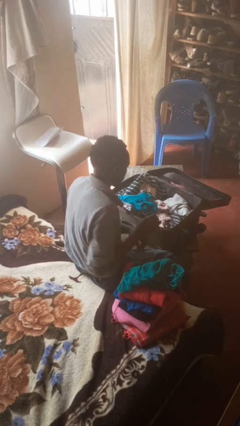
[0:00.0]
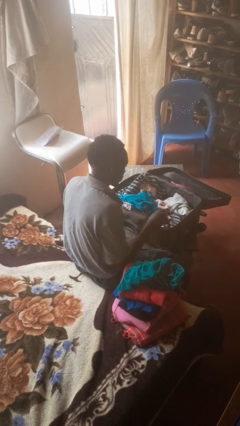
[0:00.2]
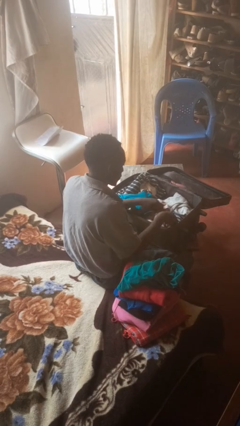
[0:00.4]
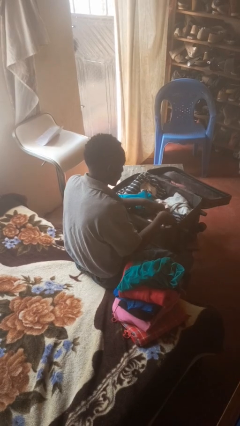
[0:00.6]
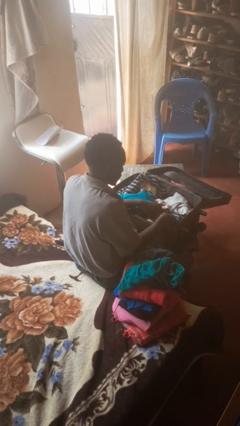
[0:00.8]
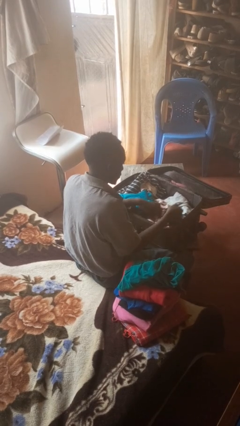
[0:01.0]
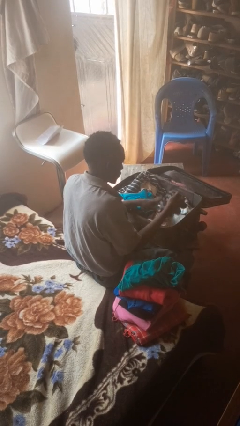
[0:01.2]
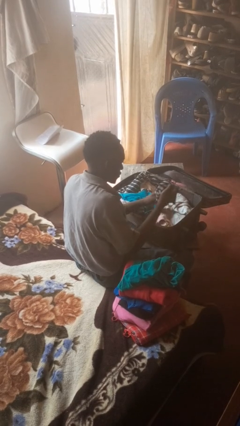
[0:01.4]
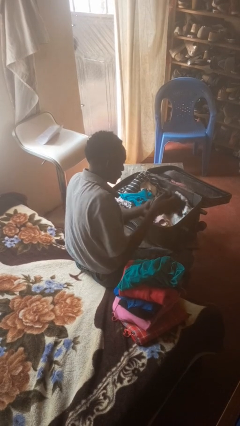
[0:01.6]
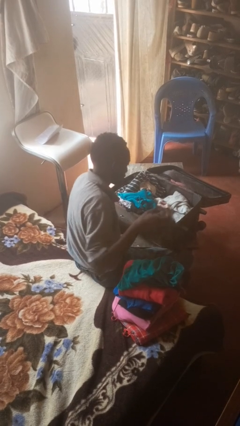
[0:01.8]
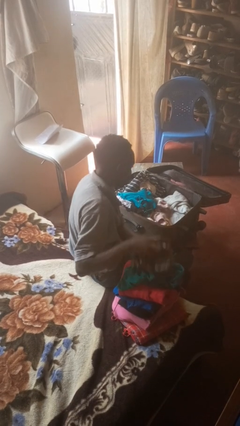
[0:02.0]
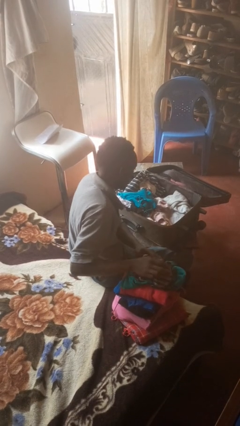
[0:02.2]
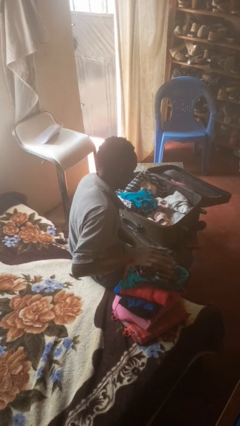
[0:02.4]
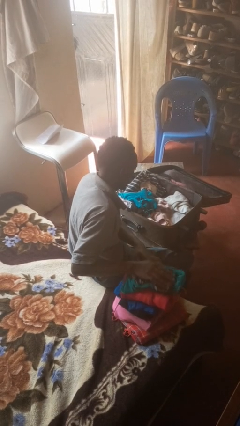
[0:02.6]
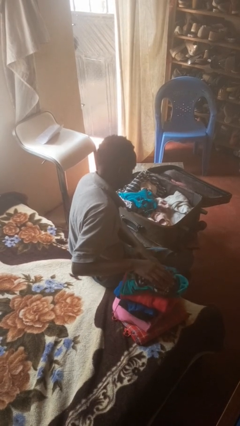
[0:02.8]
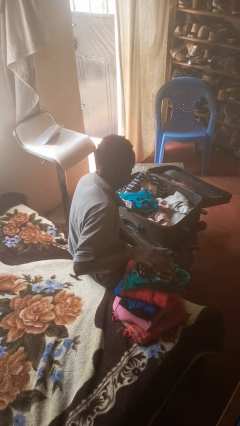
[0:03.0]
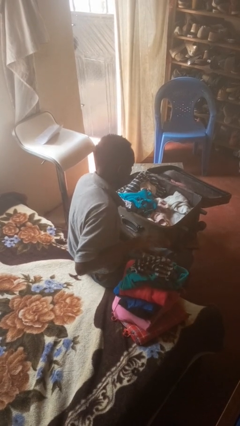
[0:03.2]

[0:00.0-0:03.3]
person unloads clothes from suitcase

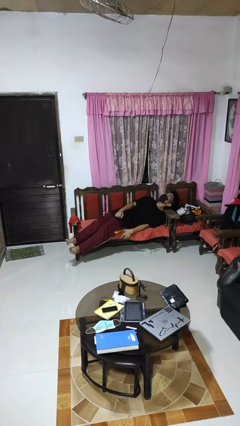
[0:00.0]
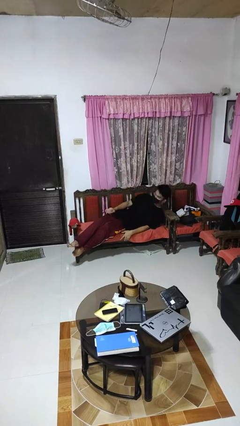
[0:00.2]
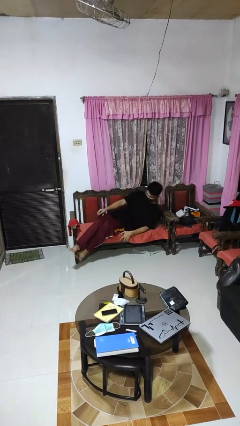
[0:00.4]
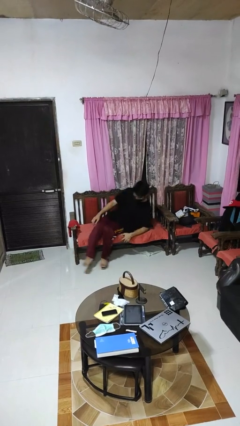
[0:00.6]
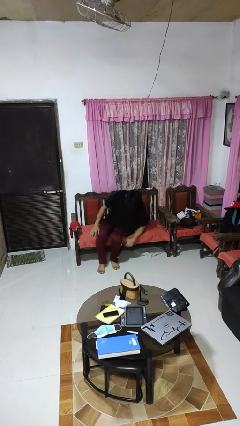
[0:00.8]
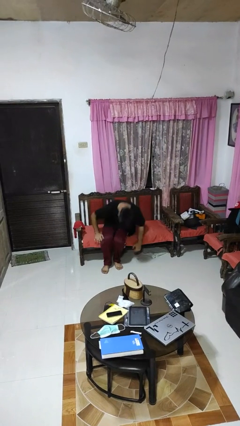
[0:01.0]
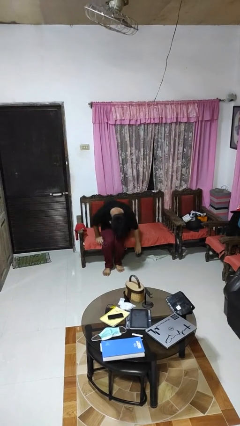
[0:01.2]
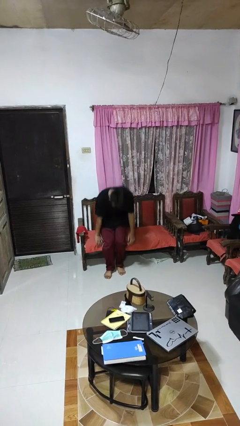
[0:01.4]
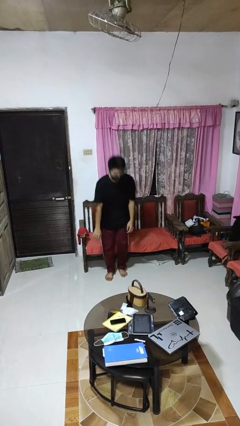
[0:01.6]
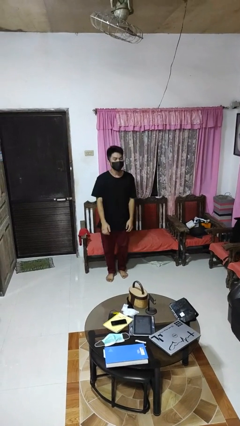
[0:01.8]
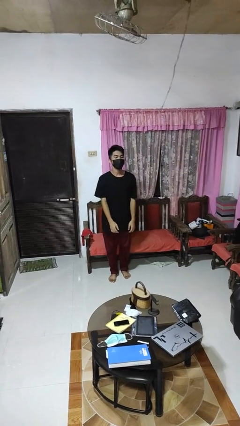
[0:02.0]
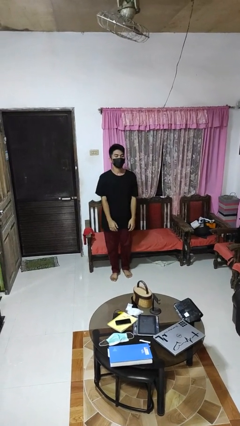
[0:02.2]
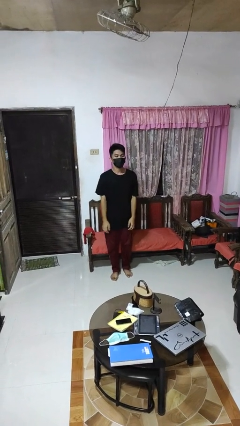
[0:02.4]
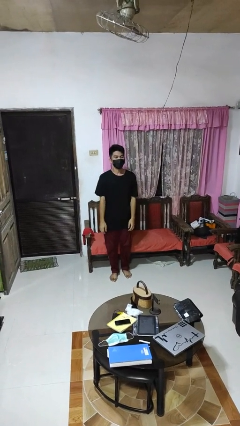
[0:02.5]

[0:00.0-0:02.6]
person stands up

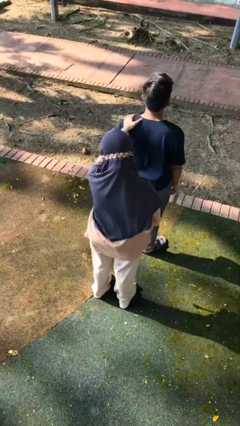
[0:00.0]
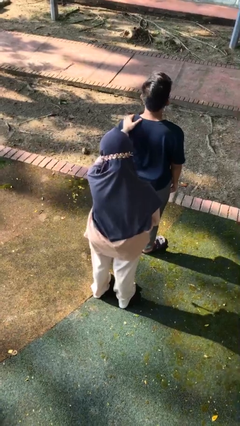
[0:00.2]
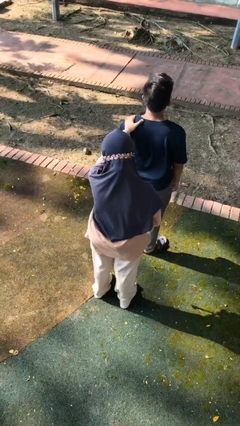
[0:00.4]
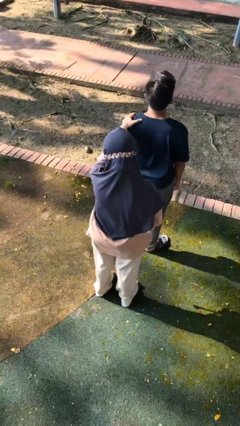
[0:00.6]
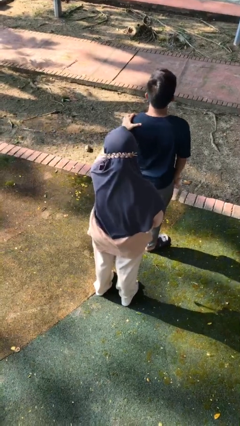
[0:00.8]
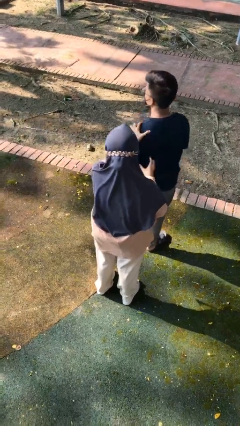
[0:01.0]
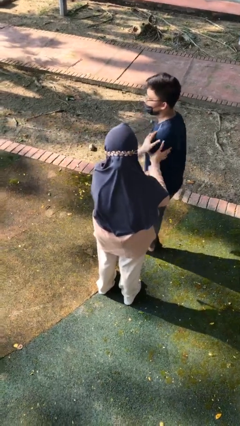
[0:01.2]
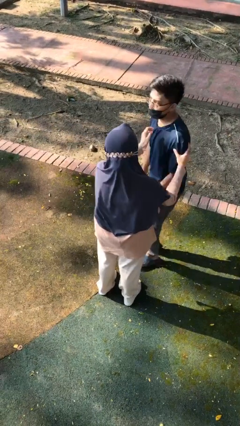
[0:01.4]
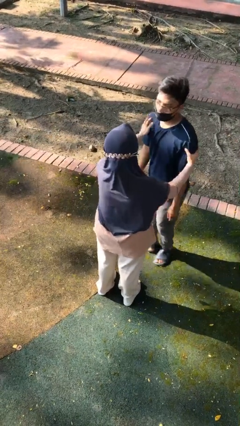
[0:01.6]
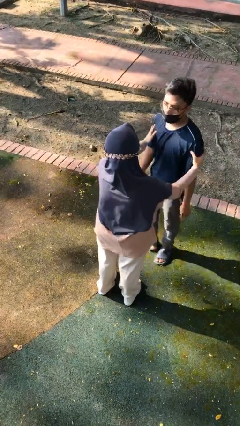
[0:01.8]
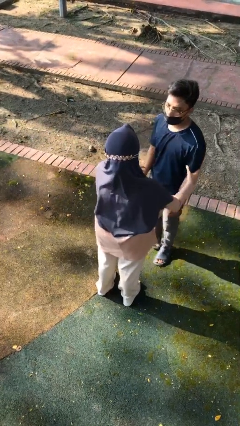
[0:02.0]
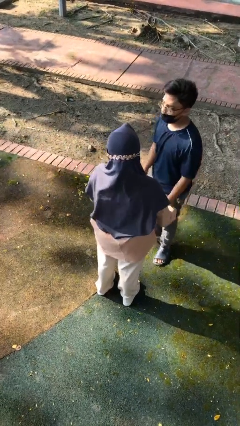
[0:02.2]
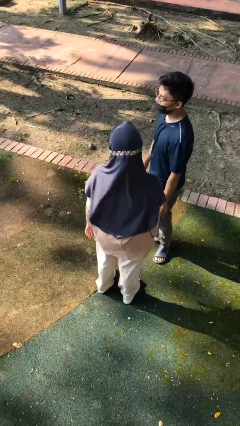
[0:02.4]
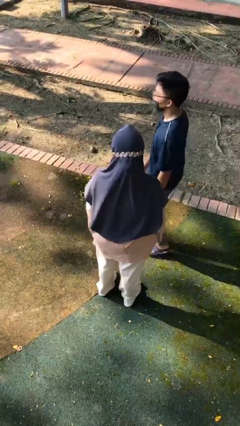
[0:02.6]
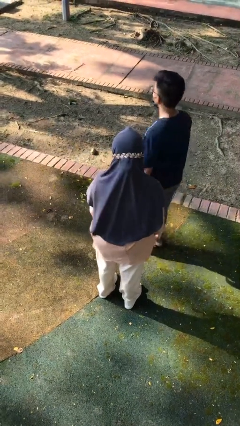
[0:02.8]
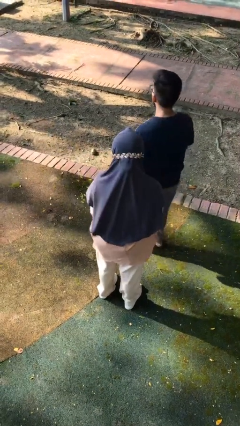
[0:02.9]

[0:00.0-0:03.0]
person spins person around

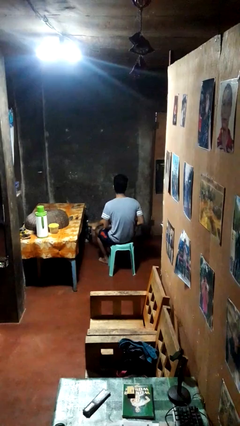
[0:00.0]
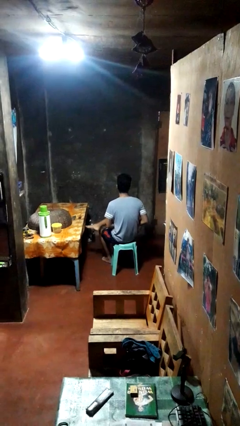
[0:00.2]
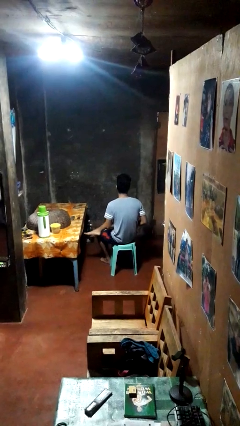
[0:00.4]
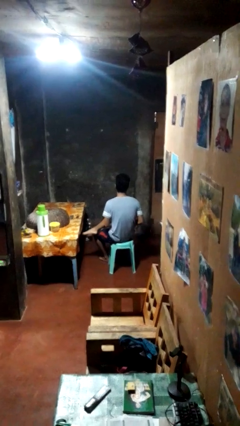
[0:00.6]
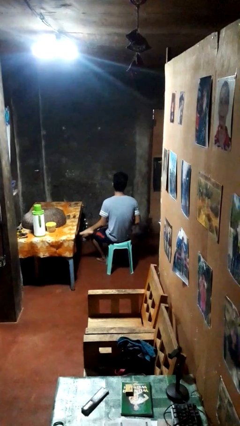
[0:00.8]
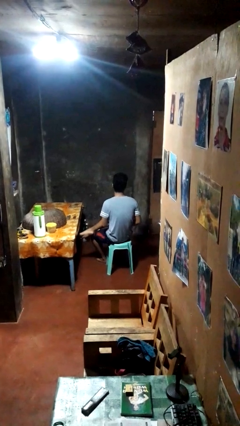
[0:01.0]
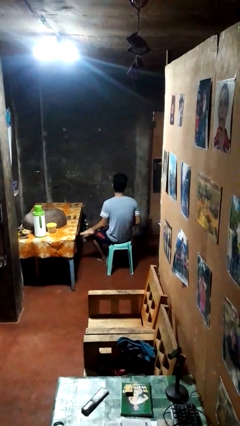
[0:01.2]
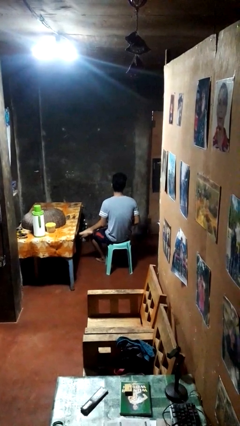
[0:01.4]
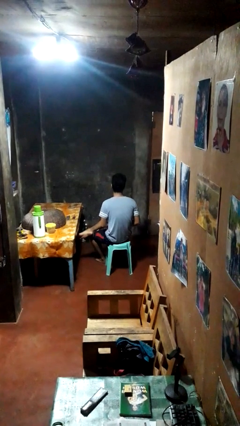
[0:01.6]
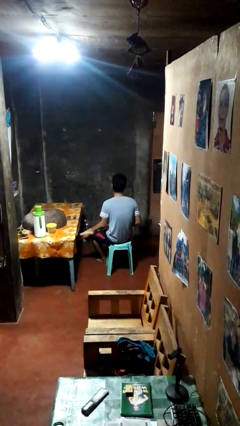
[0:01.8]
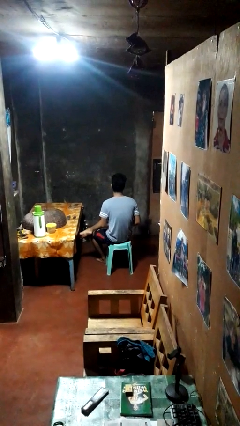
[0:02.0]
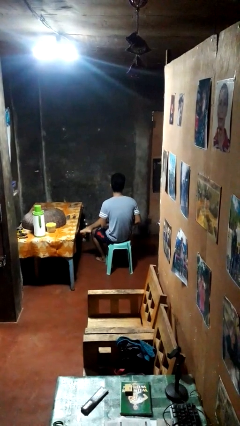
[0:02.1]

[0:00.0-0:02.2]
person crosses legs

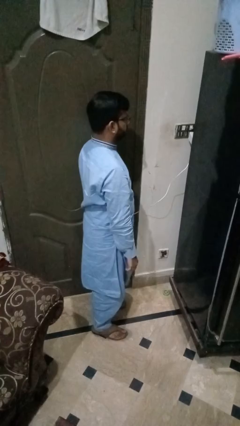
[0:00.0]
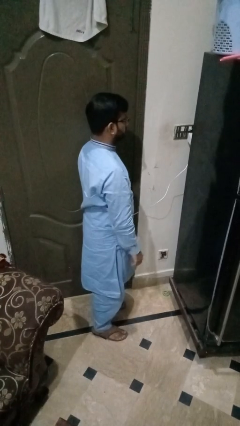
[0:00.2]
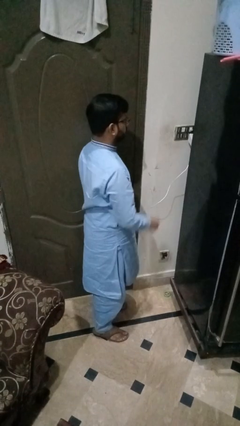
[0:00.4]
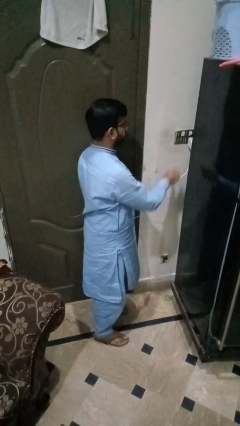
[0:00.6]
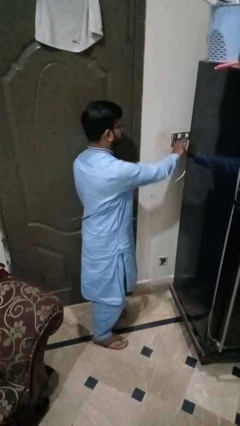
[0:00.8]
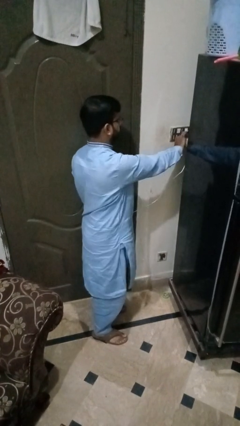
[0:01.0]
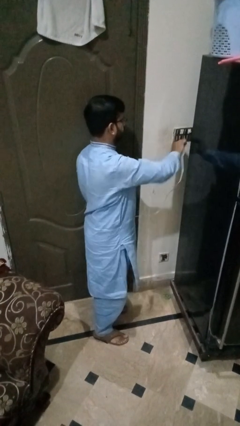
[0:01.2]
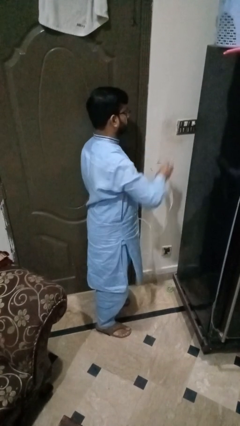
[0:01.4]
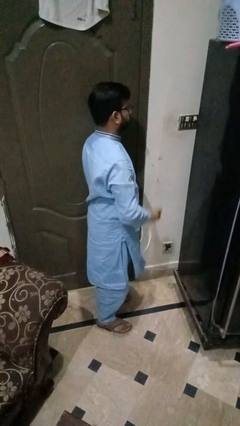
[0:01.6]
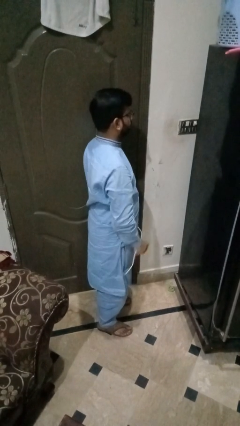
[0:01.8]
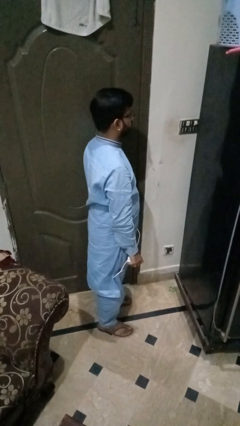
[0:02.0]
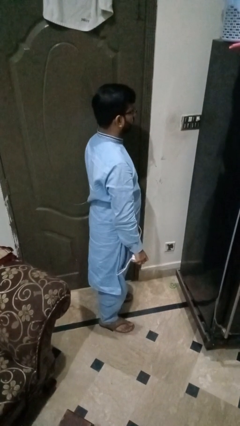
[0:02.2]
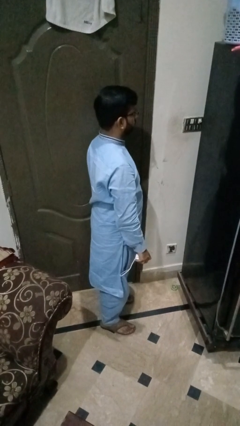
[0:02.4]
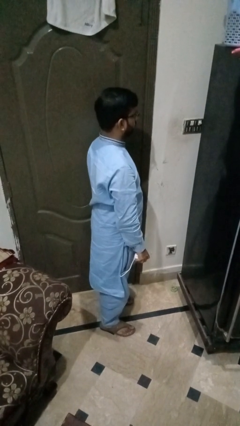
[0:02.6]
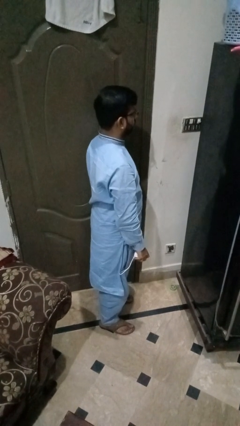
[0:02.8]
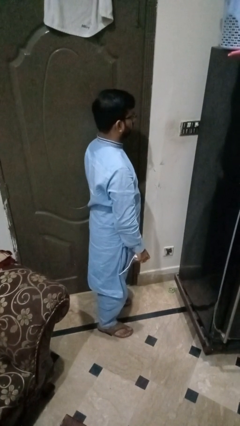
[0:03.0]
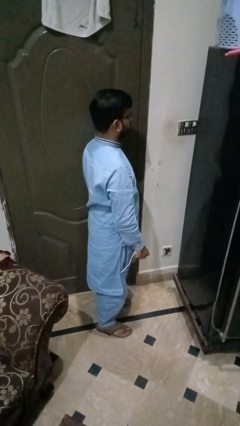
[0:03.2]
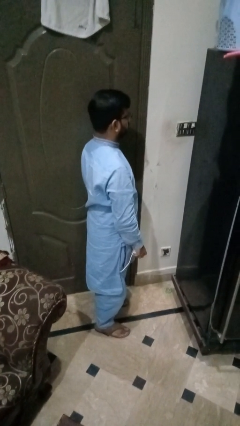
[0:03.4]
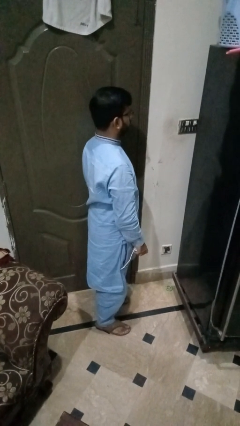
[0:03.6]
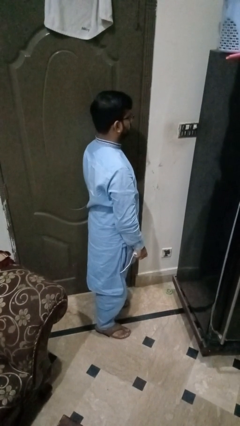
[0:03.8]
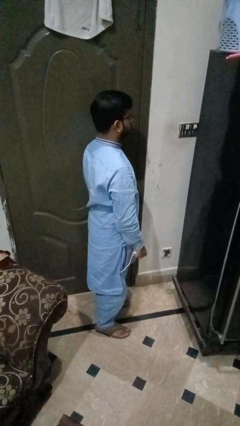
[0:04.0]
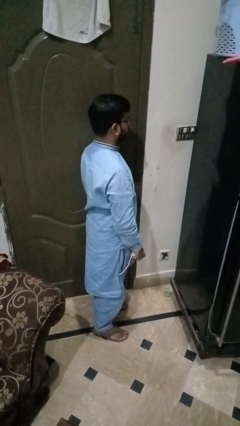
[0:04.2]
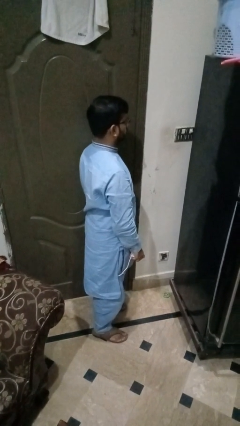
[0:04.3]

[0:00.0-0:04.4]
person unplugs from electrical socket

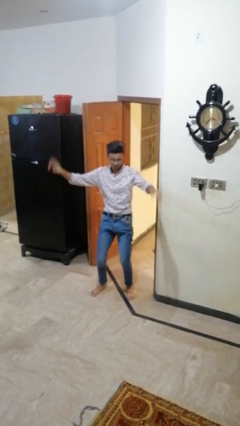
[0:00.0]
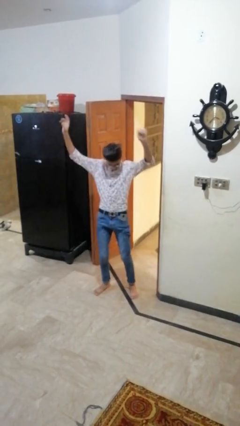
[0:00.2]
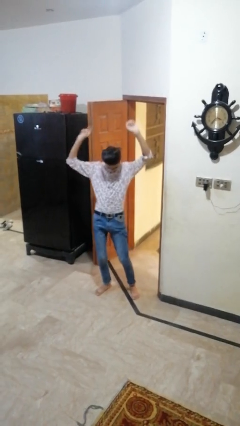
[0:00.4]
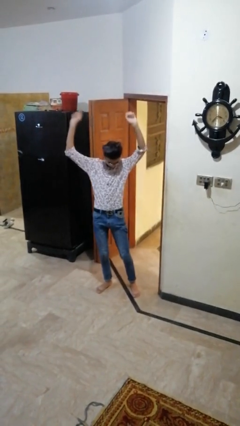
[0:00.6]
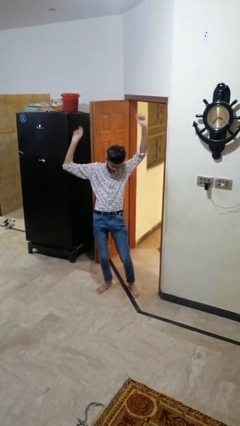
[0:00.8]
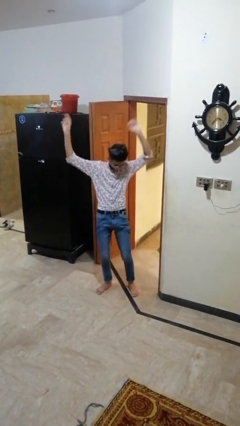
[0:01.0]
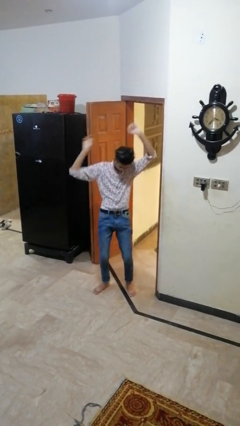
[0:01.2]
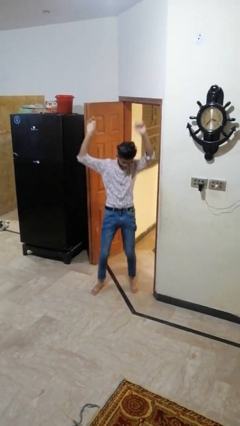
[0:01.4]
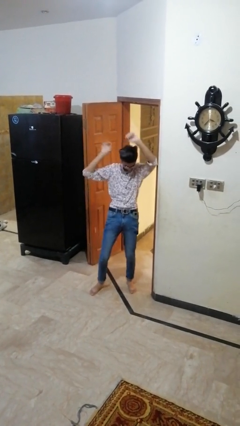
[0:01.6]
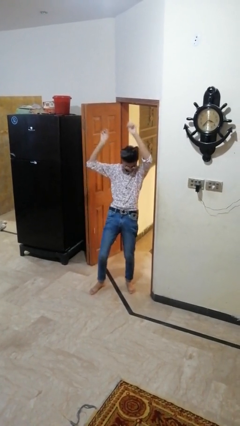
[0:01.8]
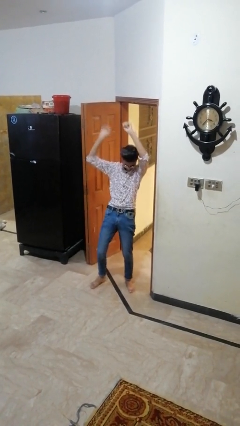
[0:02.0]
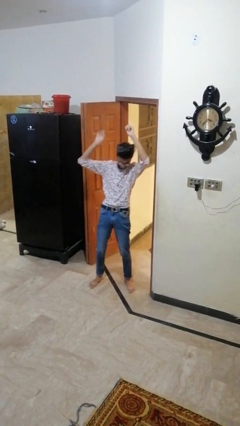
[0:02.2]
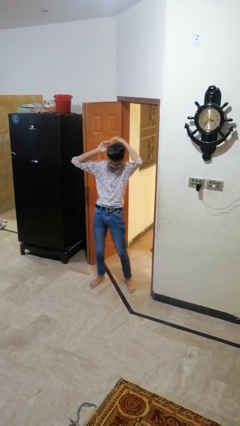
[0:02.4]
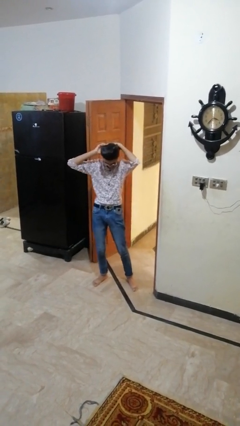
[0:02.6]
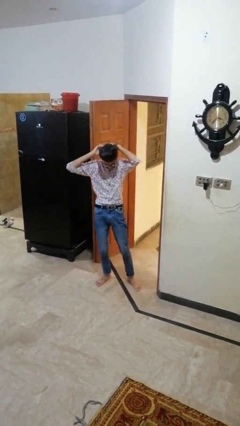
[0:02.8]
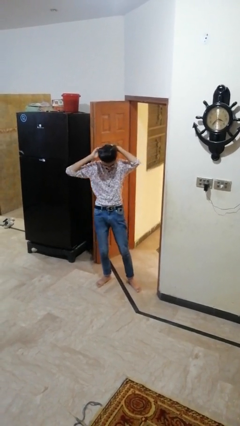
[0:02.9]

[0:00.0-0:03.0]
person dances in place
